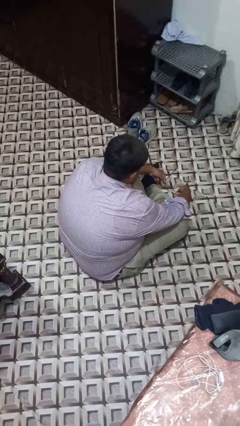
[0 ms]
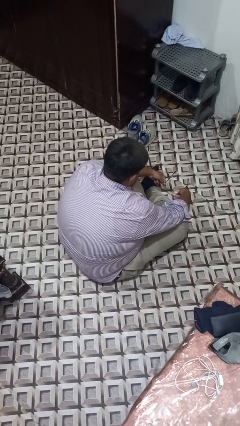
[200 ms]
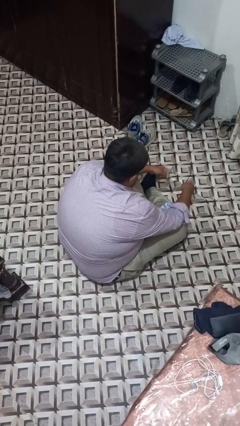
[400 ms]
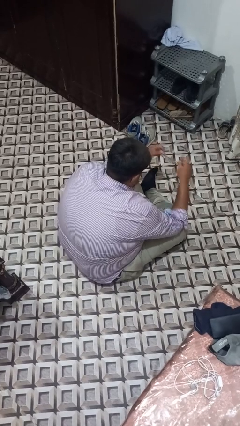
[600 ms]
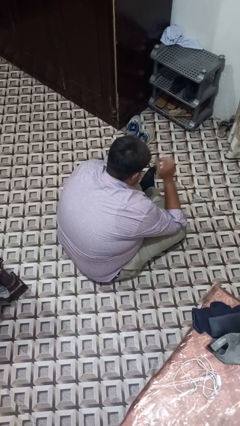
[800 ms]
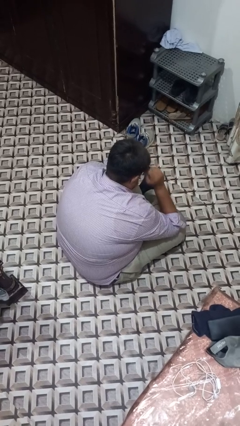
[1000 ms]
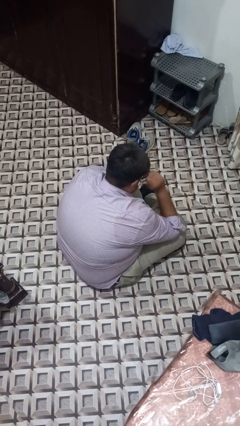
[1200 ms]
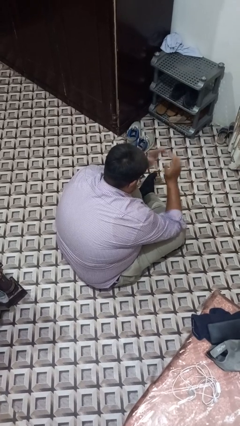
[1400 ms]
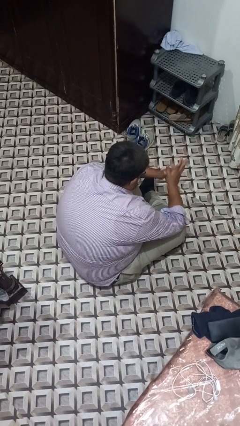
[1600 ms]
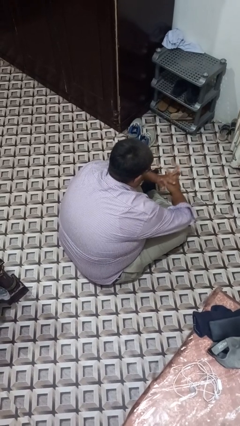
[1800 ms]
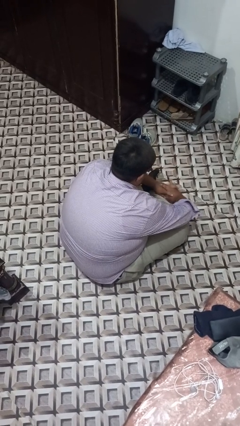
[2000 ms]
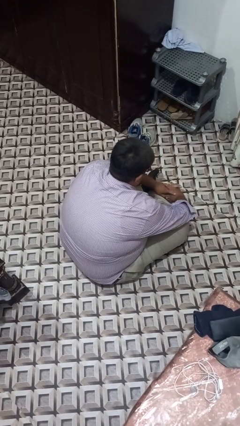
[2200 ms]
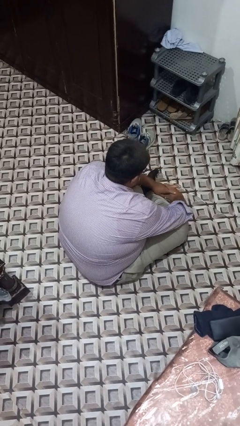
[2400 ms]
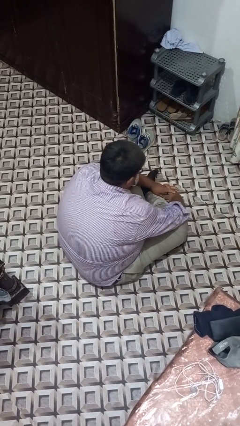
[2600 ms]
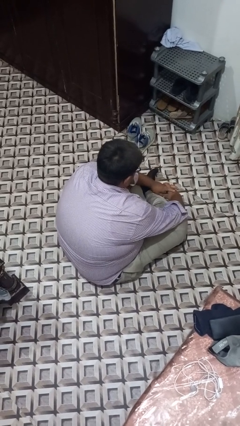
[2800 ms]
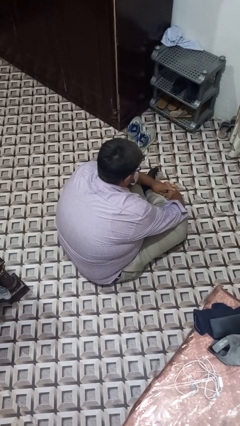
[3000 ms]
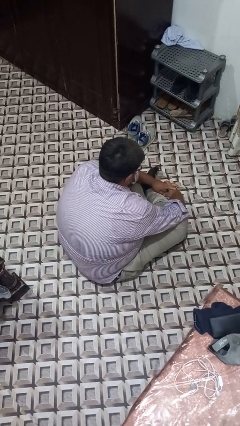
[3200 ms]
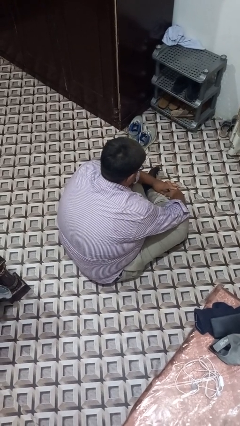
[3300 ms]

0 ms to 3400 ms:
person puts on glasses

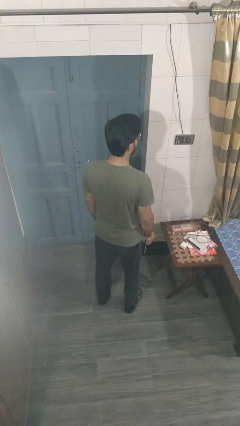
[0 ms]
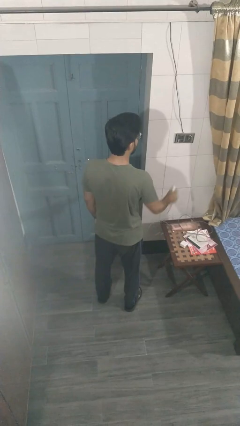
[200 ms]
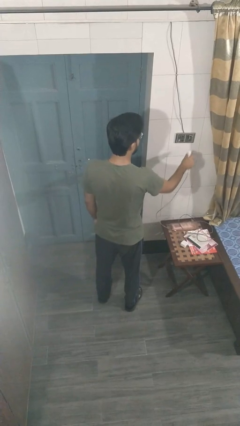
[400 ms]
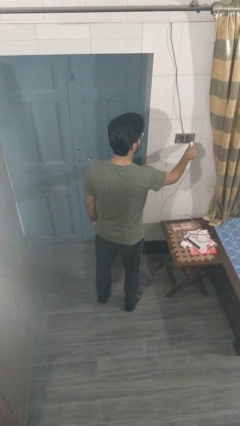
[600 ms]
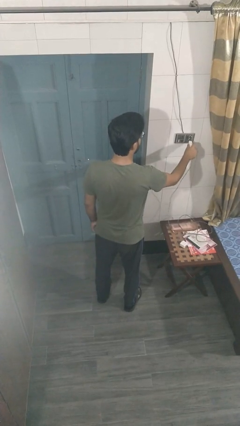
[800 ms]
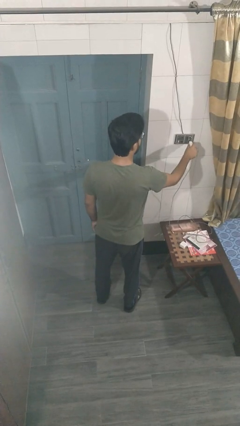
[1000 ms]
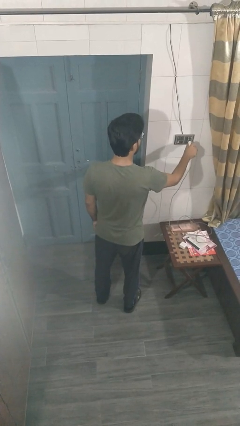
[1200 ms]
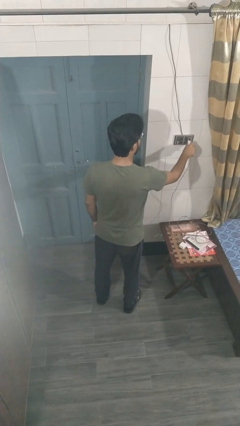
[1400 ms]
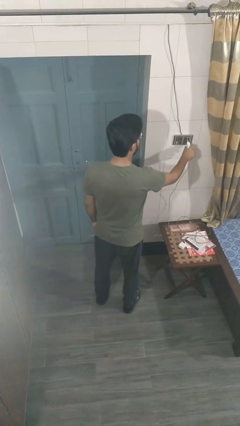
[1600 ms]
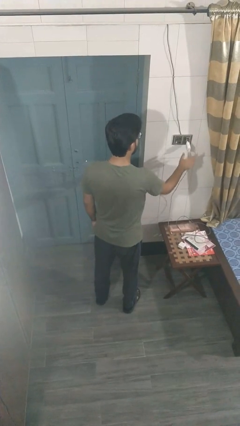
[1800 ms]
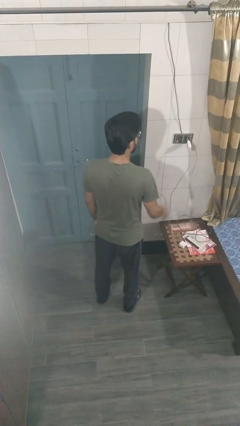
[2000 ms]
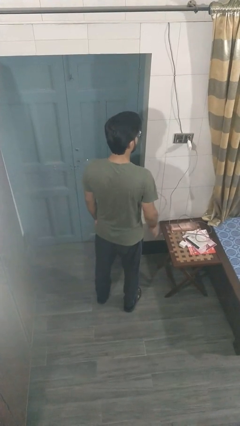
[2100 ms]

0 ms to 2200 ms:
person plugs into electrical socket

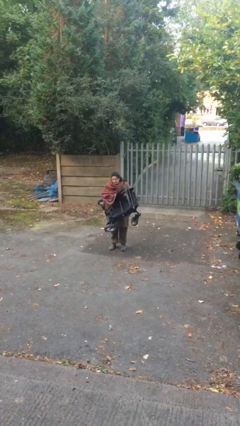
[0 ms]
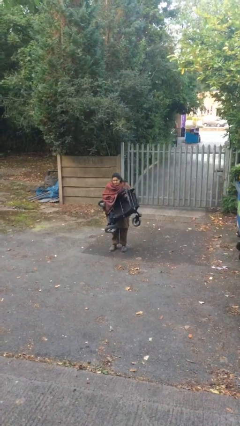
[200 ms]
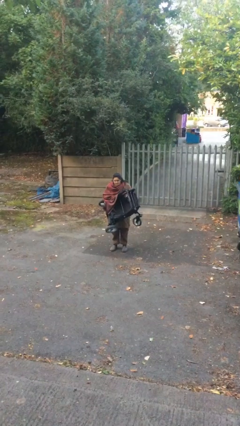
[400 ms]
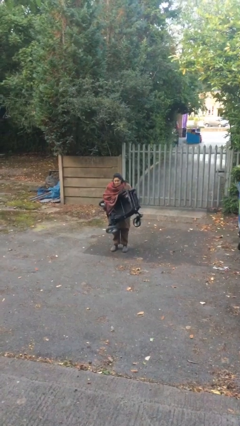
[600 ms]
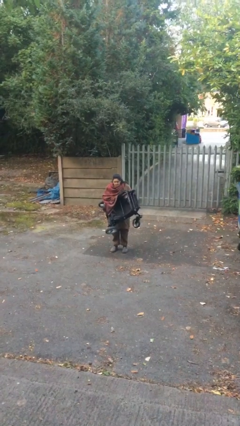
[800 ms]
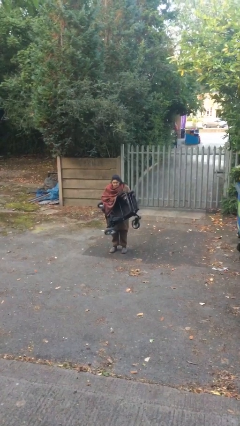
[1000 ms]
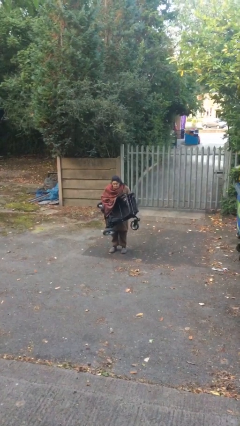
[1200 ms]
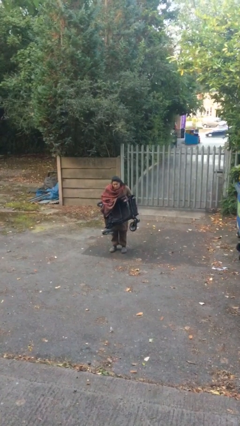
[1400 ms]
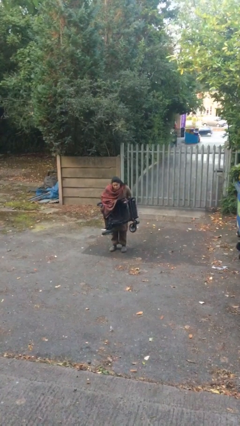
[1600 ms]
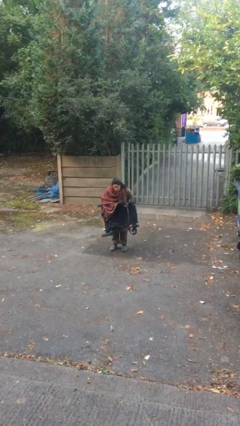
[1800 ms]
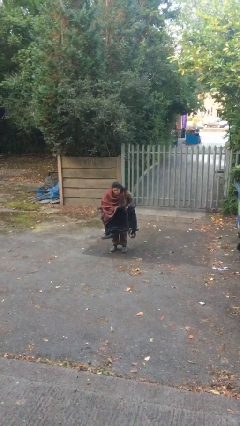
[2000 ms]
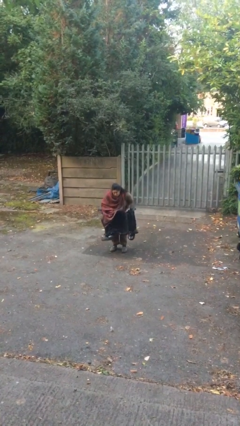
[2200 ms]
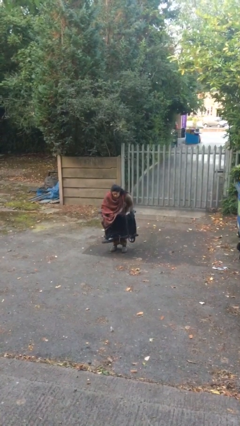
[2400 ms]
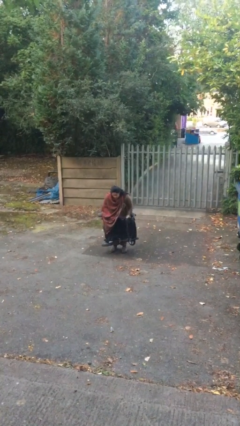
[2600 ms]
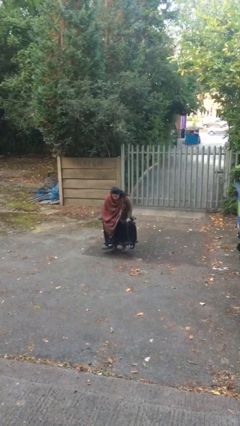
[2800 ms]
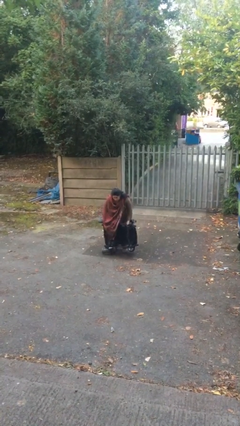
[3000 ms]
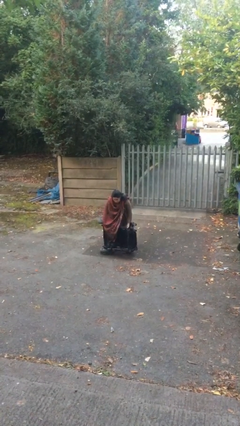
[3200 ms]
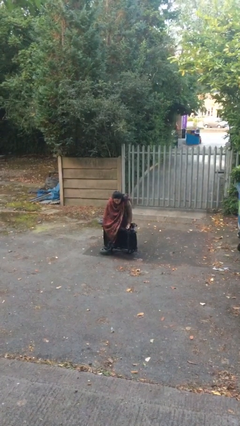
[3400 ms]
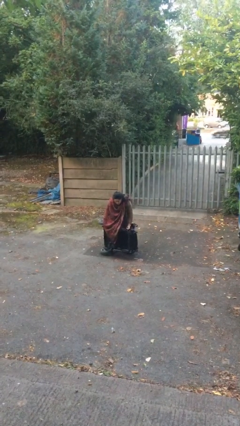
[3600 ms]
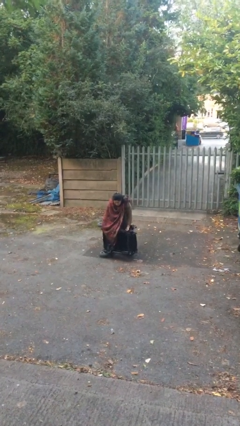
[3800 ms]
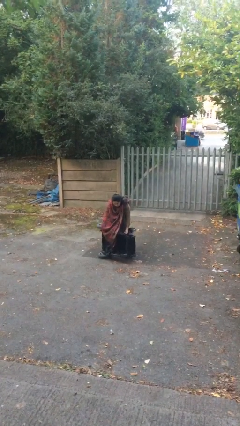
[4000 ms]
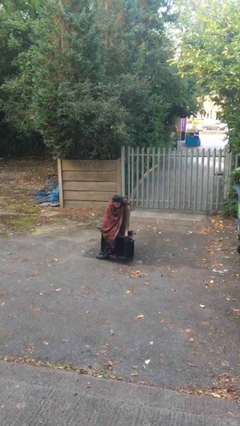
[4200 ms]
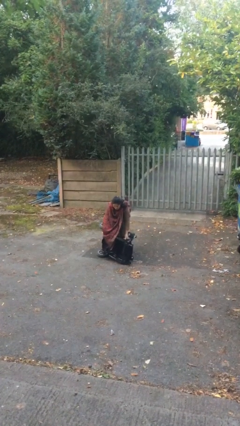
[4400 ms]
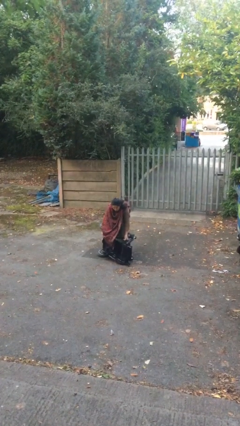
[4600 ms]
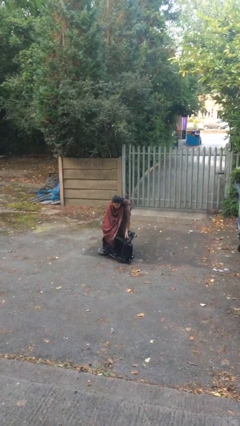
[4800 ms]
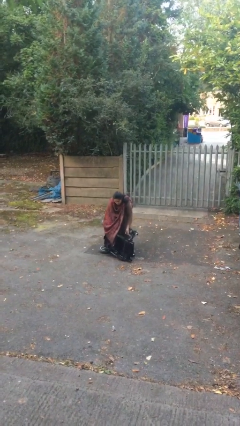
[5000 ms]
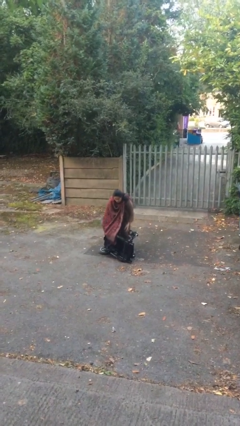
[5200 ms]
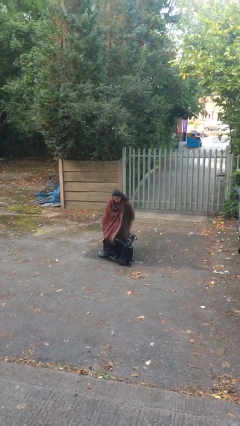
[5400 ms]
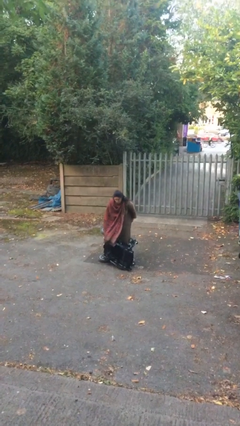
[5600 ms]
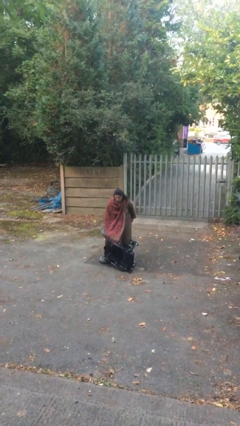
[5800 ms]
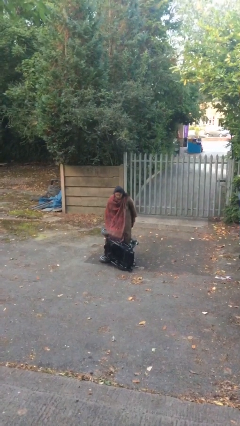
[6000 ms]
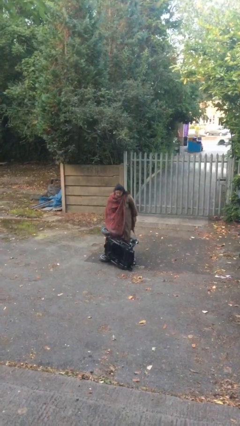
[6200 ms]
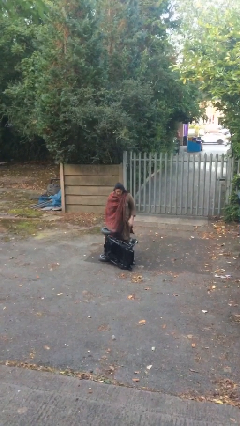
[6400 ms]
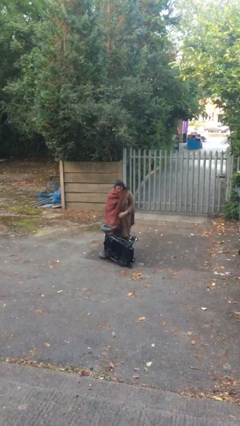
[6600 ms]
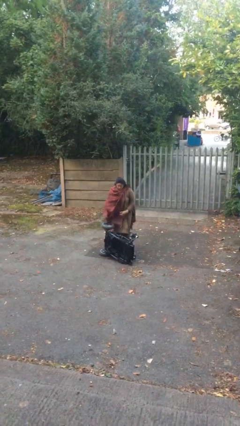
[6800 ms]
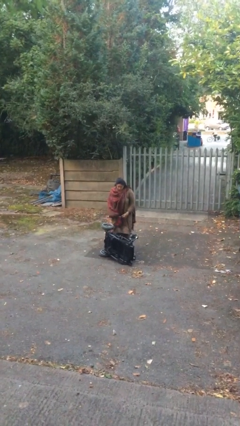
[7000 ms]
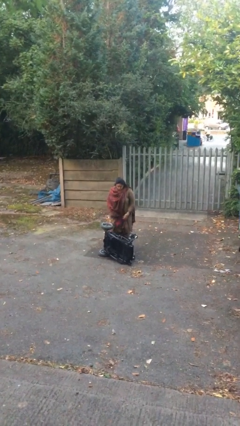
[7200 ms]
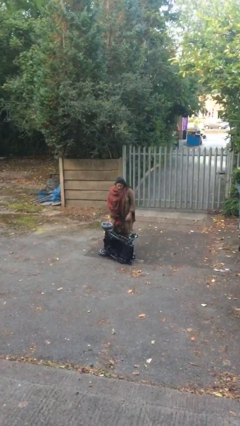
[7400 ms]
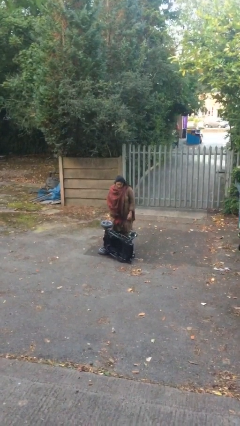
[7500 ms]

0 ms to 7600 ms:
person puts down object on floor

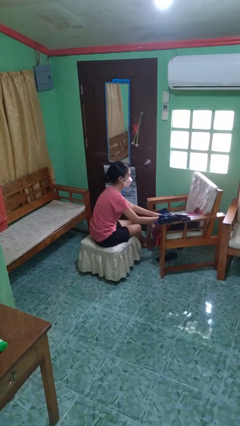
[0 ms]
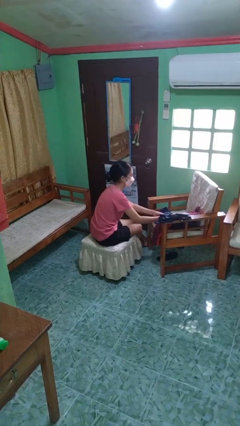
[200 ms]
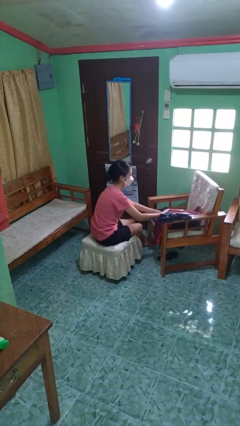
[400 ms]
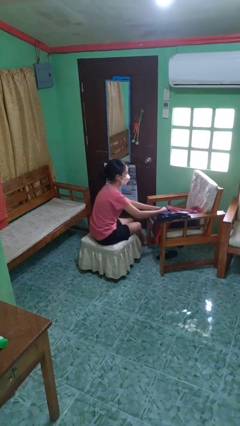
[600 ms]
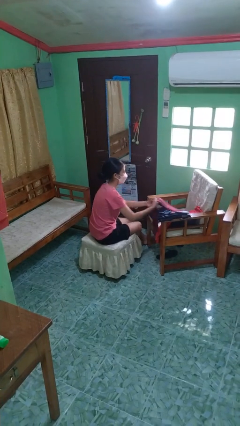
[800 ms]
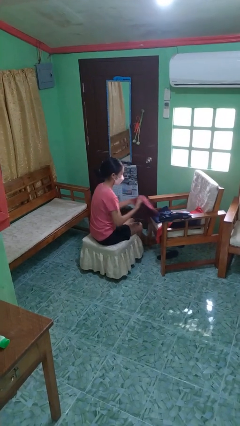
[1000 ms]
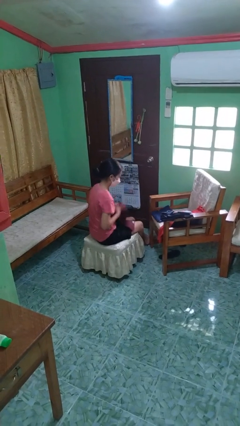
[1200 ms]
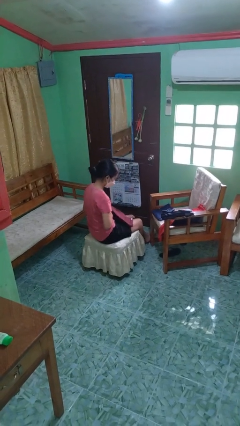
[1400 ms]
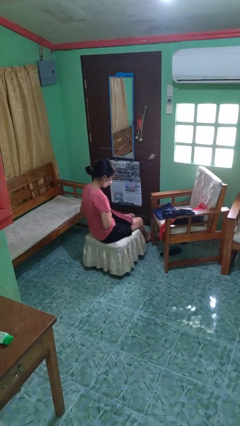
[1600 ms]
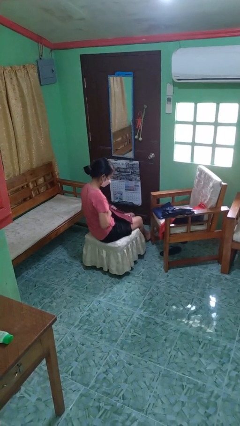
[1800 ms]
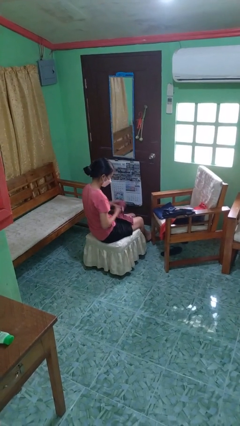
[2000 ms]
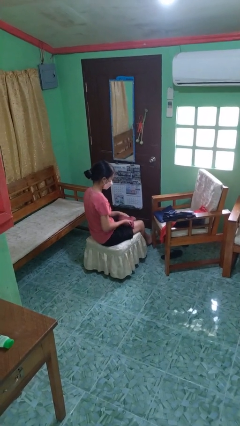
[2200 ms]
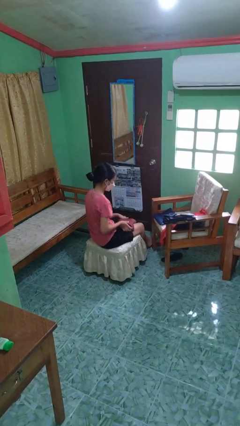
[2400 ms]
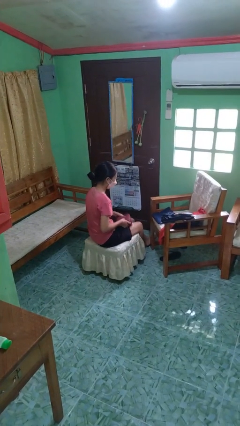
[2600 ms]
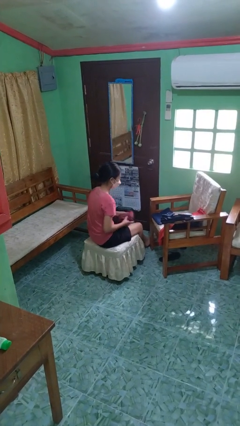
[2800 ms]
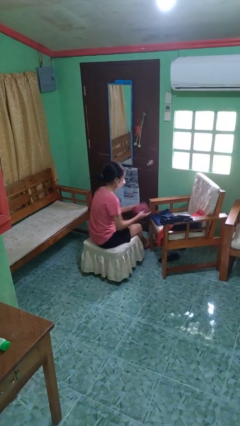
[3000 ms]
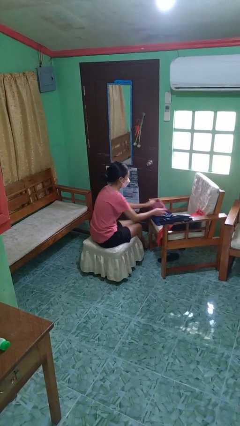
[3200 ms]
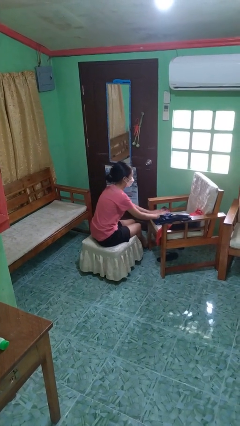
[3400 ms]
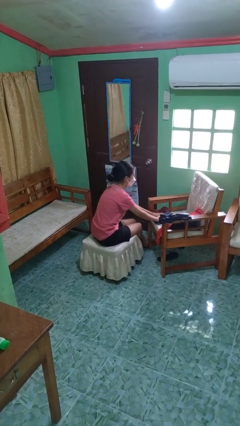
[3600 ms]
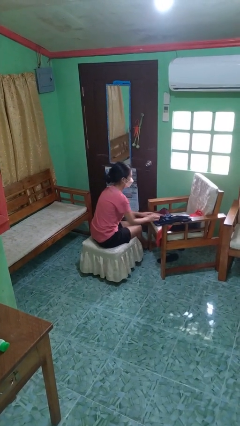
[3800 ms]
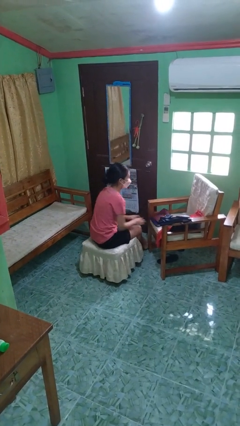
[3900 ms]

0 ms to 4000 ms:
person folds shirt

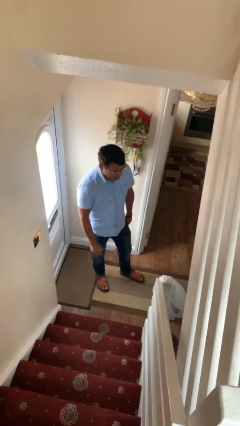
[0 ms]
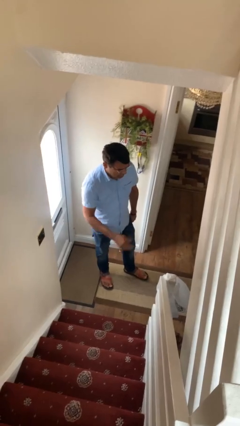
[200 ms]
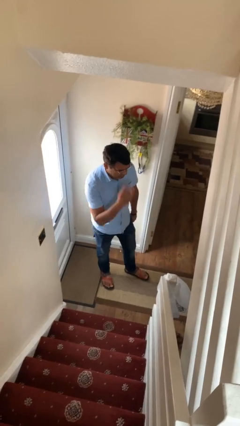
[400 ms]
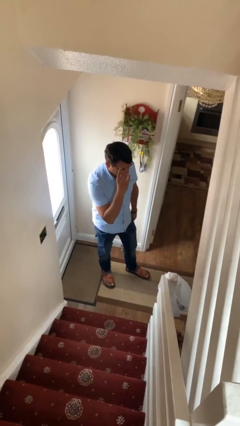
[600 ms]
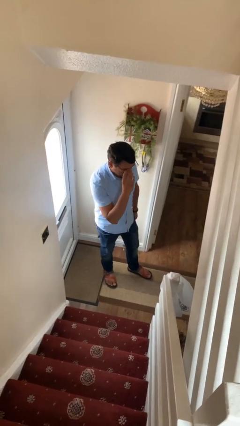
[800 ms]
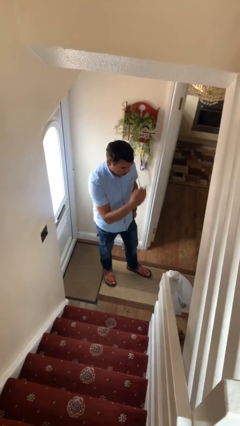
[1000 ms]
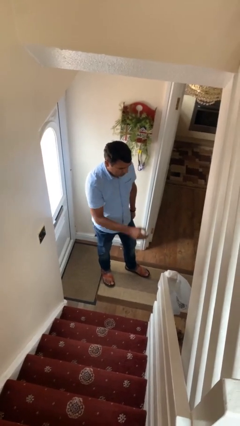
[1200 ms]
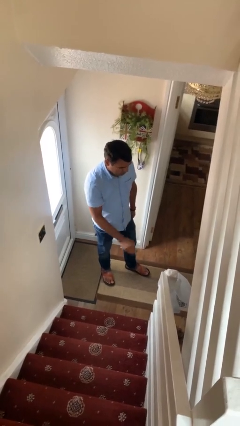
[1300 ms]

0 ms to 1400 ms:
person takes off glasses
